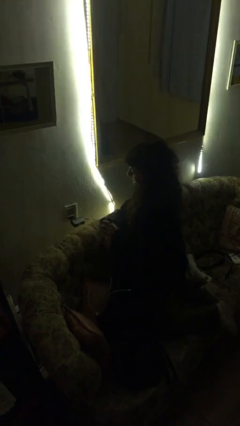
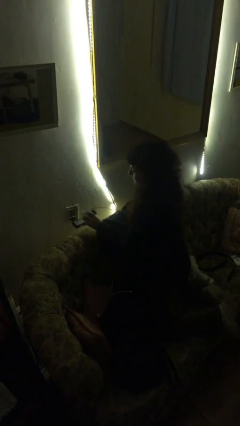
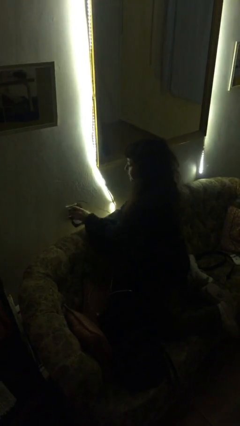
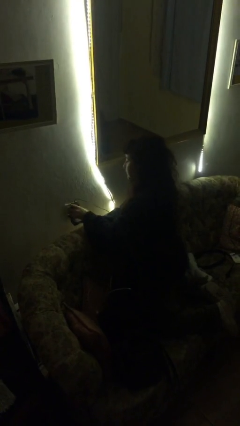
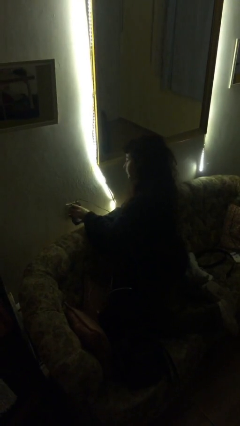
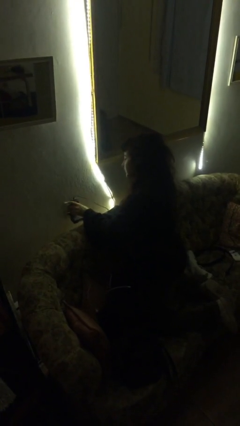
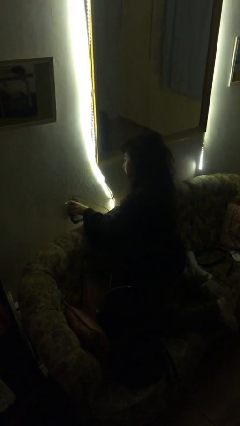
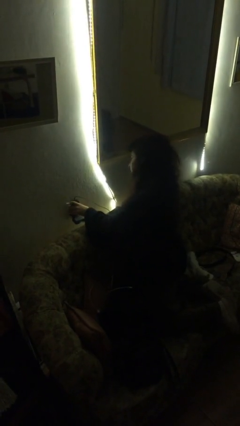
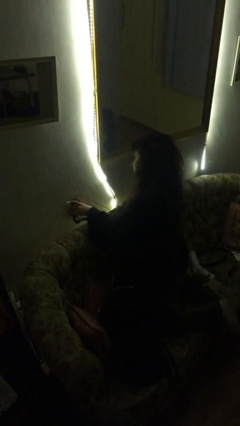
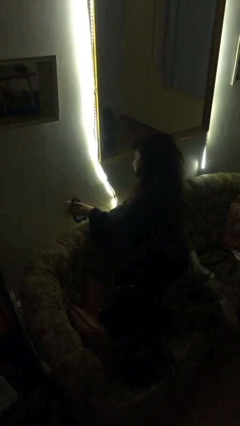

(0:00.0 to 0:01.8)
person plugs into electrical socket

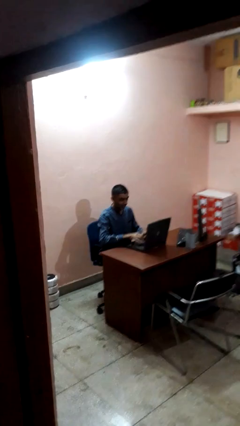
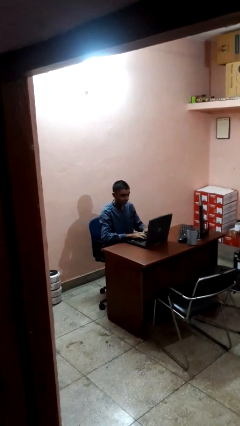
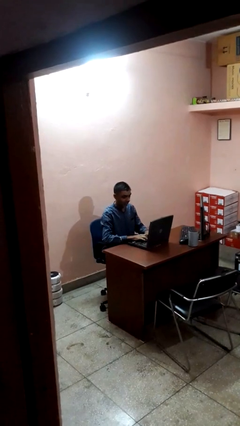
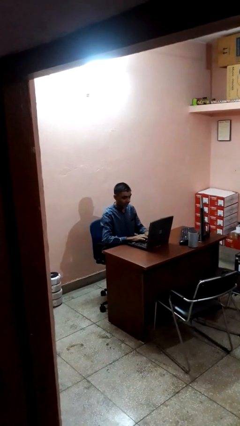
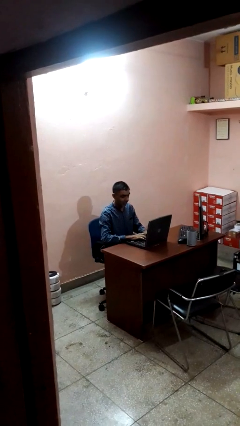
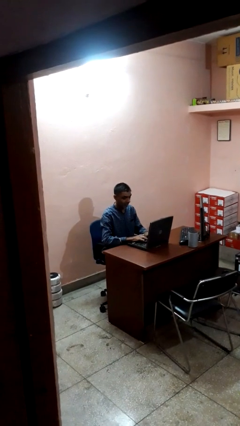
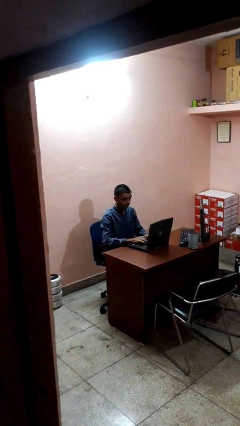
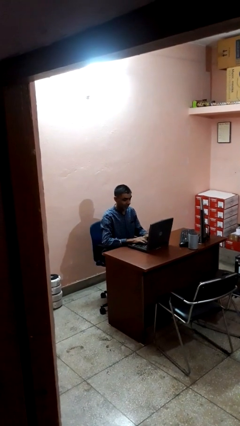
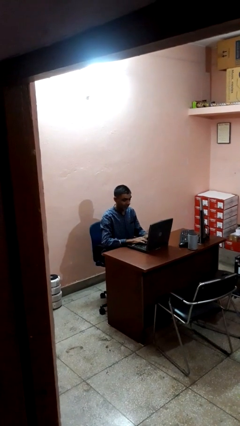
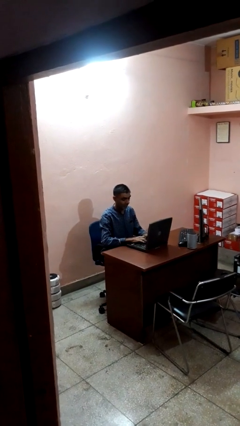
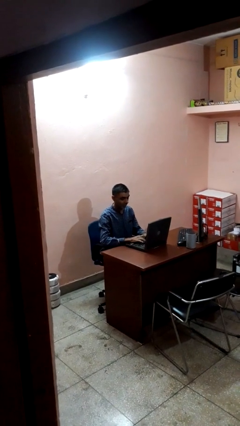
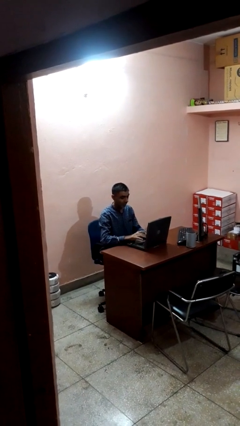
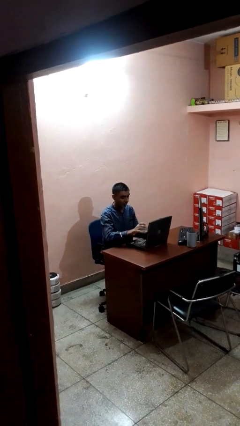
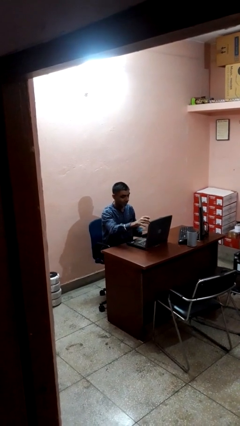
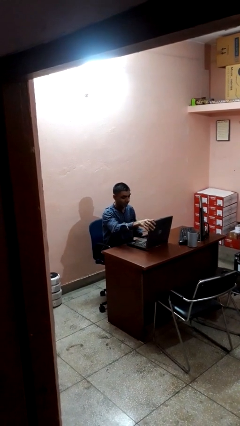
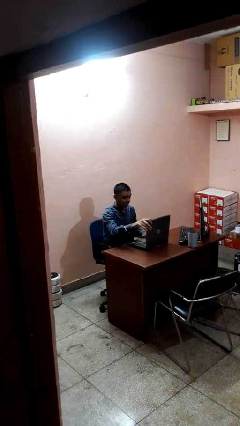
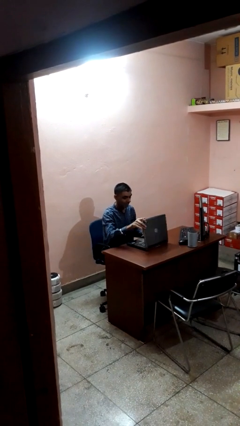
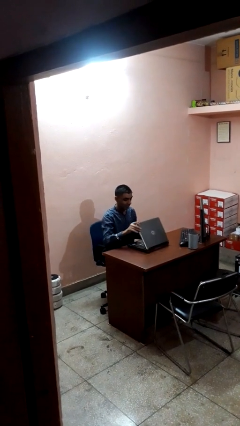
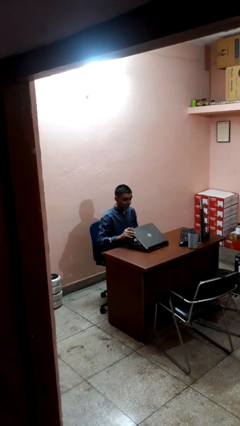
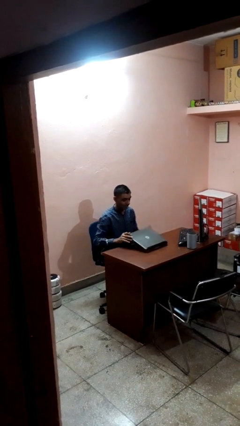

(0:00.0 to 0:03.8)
person interacts with laptop

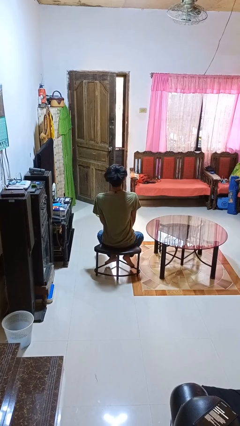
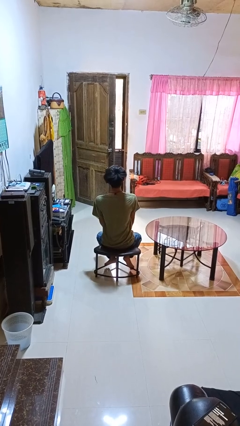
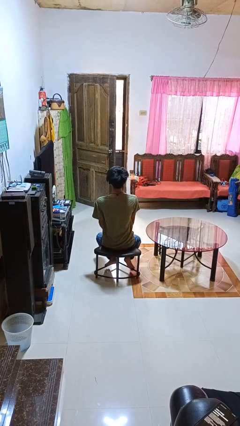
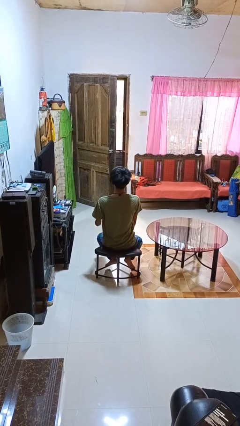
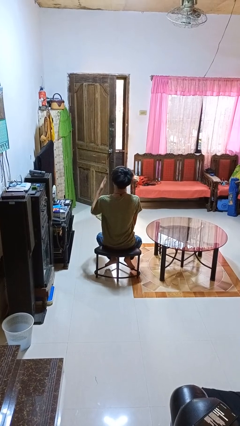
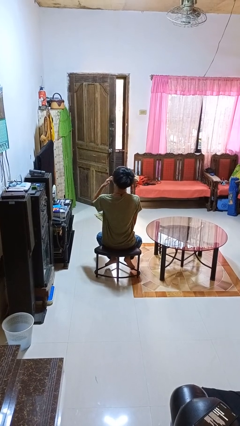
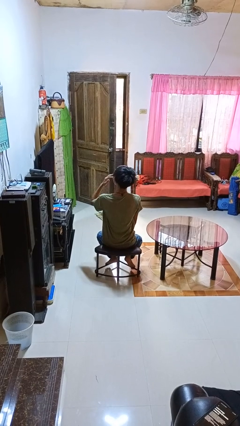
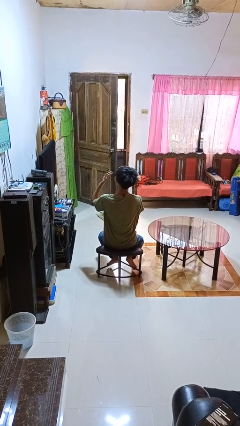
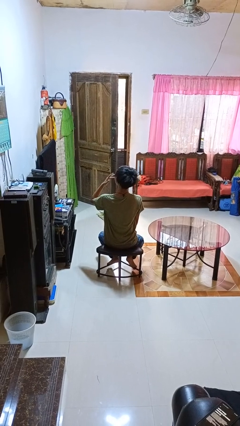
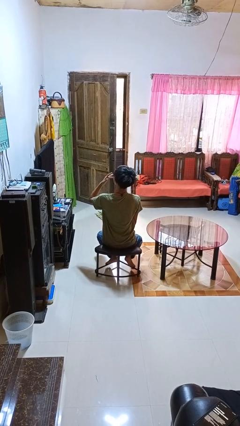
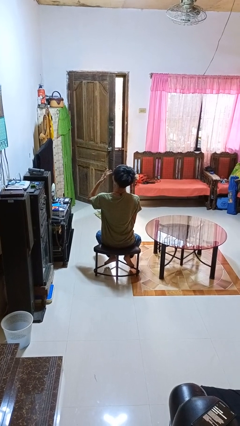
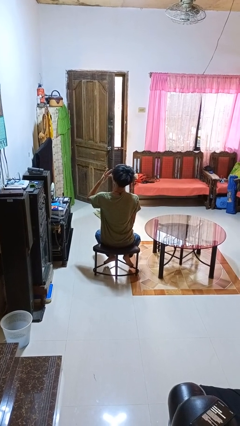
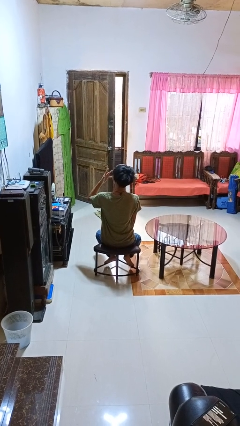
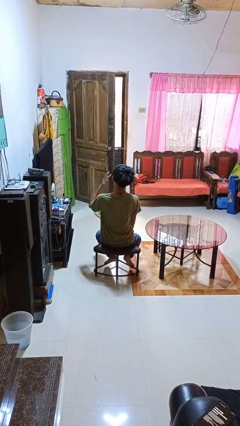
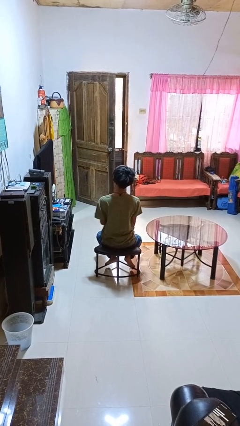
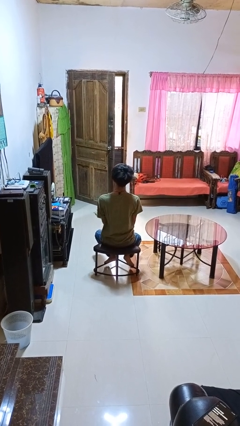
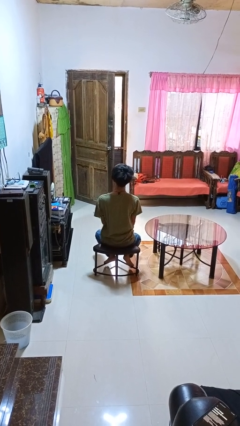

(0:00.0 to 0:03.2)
person licks fingers

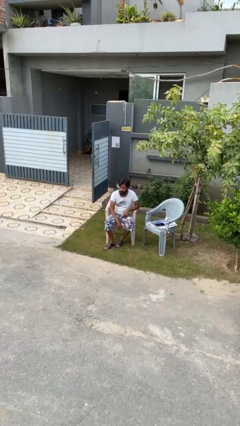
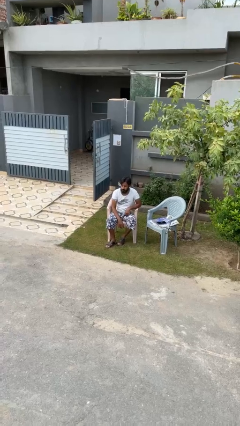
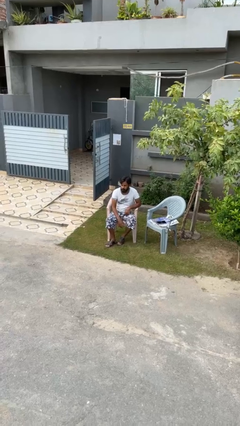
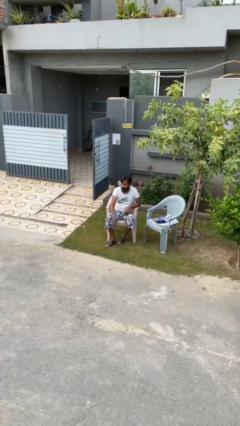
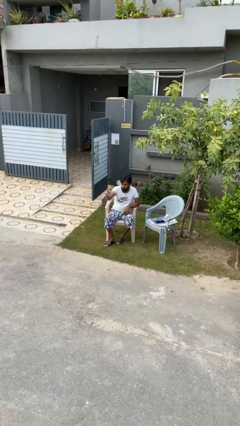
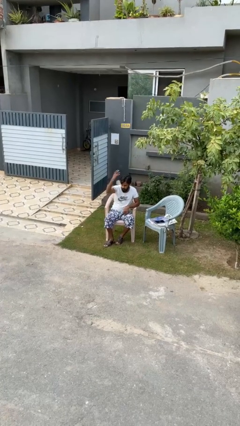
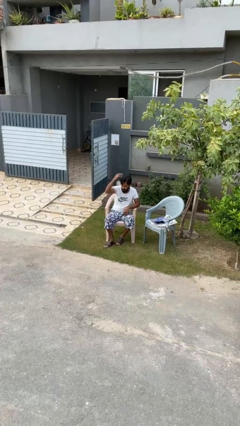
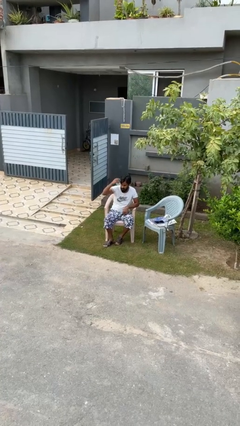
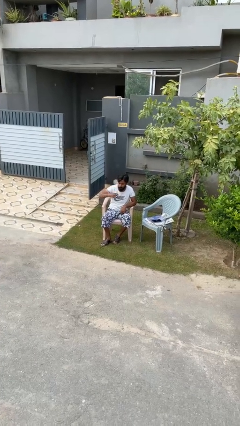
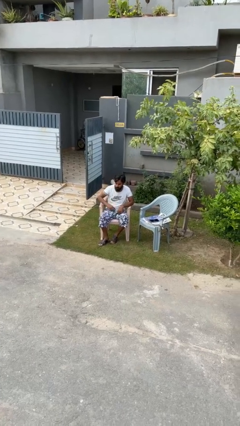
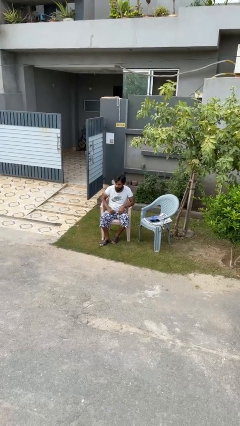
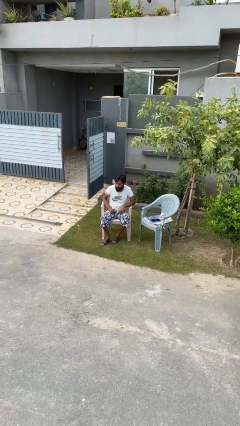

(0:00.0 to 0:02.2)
person gestures swipe up

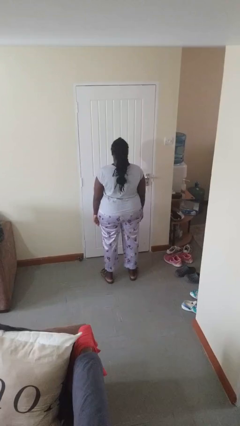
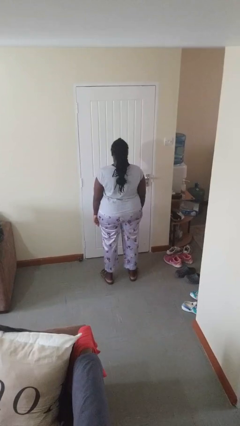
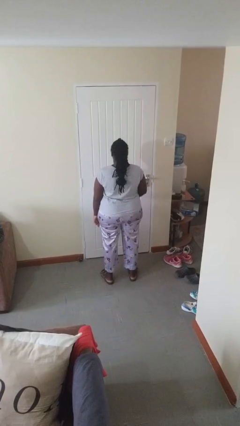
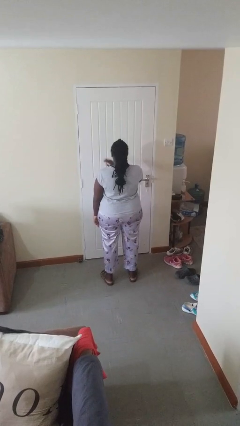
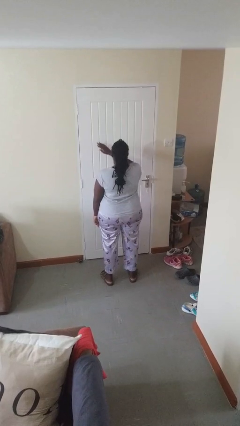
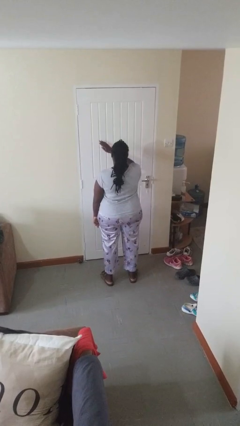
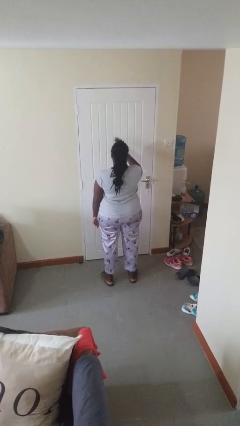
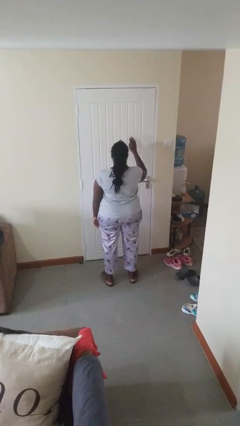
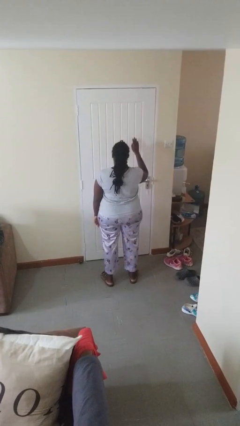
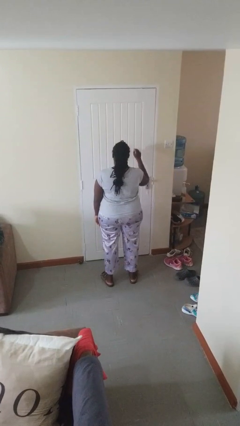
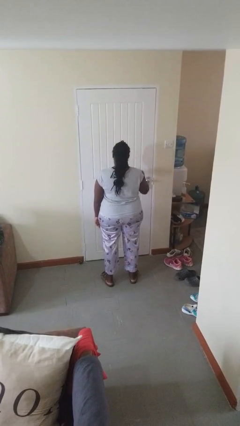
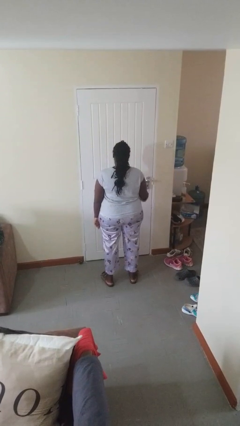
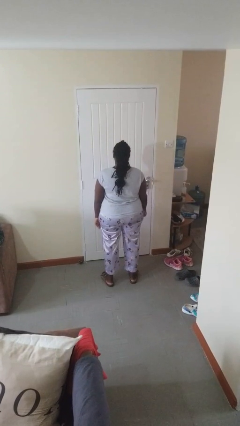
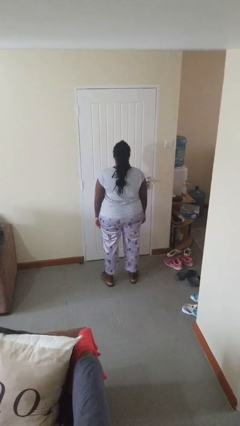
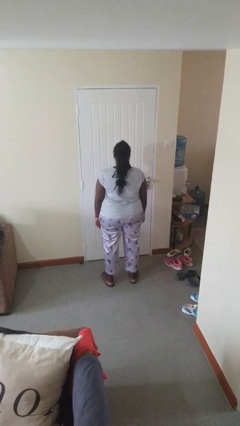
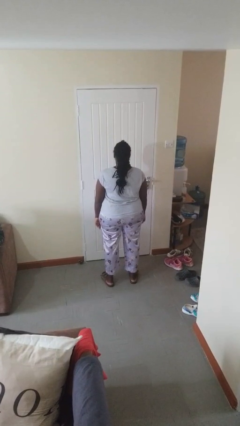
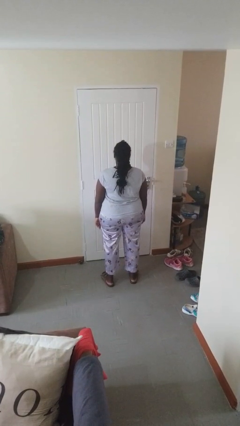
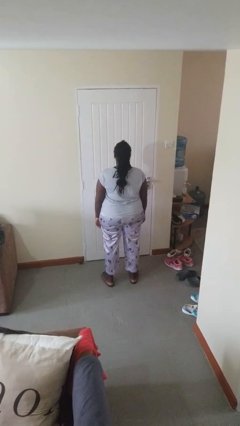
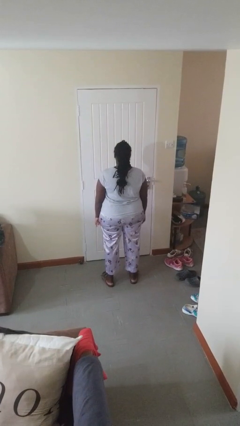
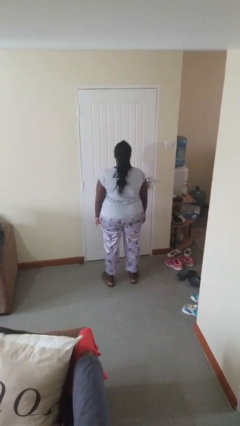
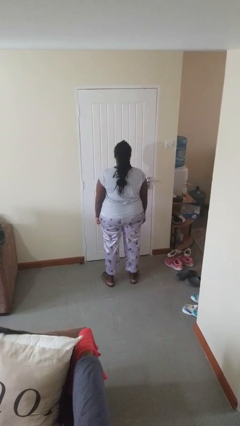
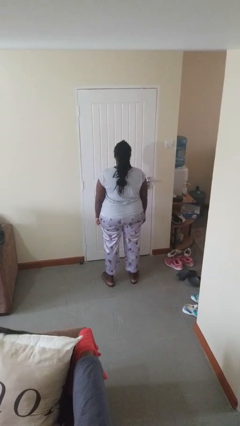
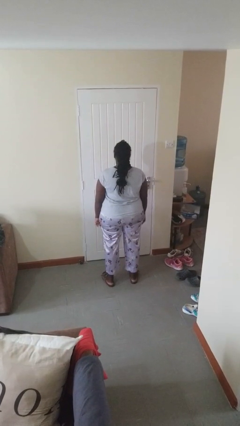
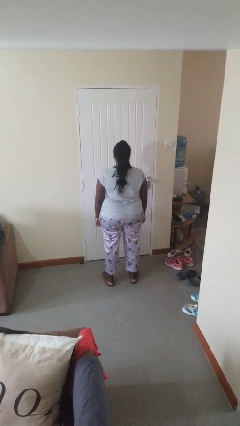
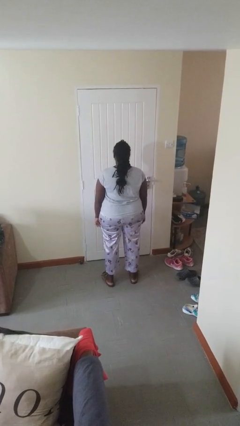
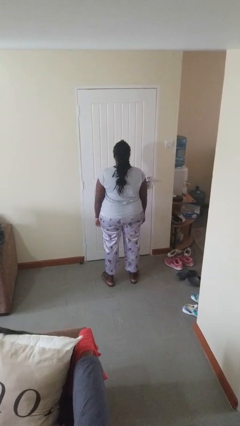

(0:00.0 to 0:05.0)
person gestures swipe right

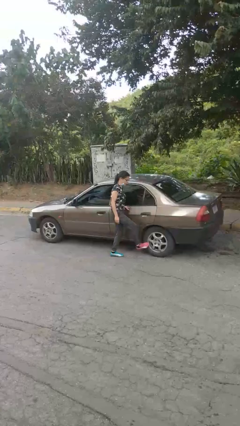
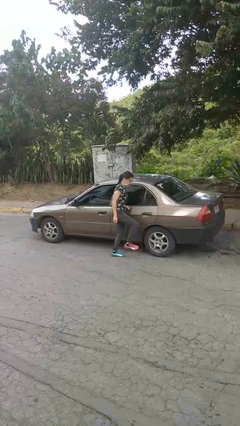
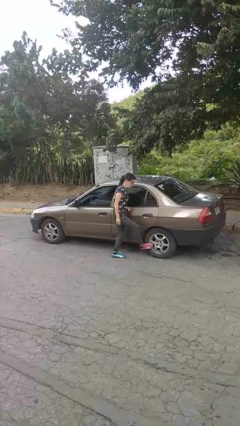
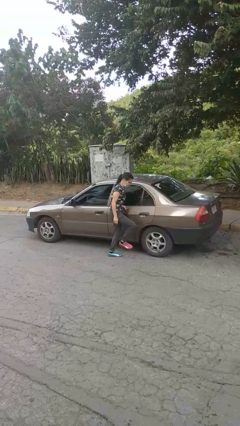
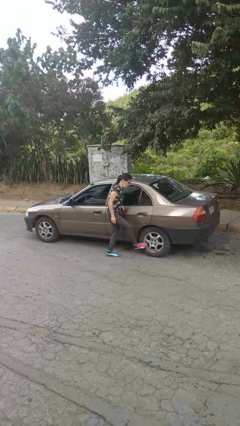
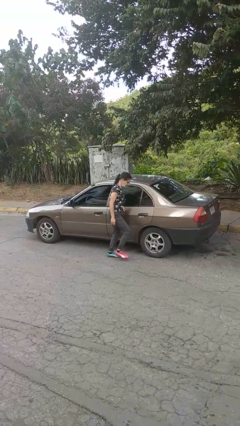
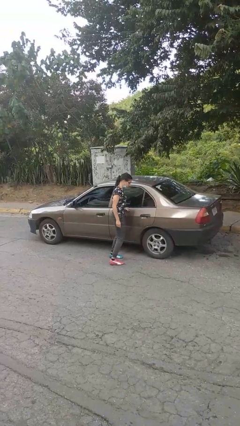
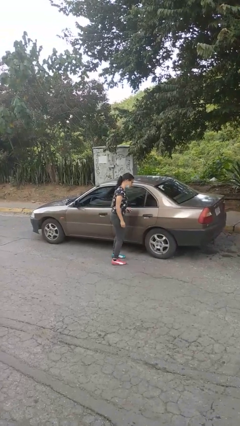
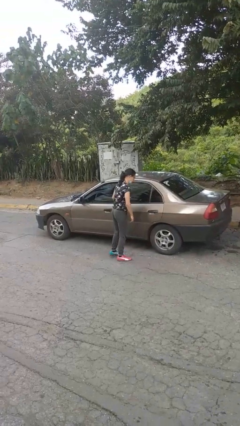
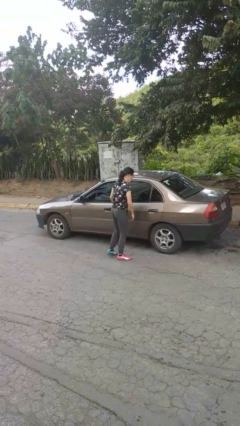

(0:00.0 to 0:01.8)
person kicks car tires
